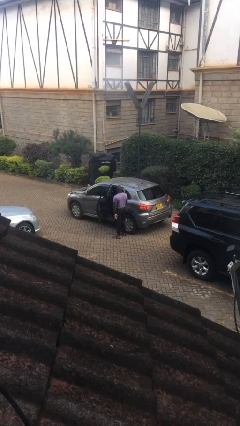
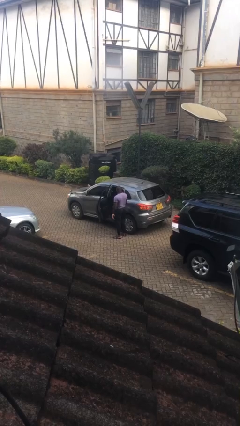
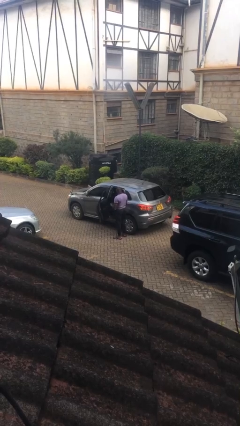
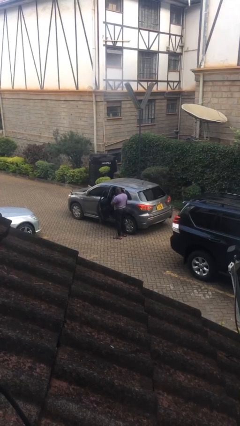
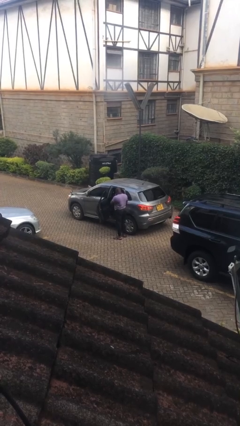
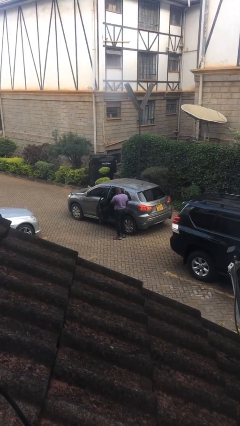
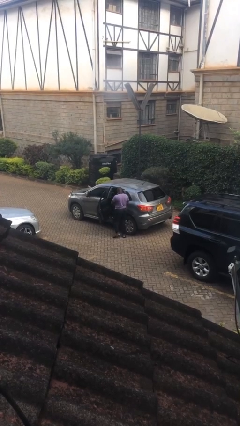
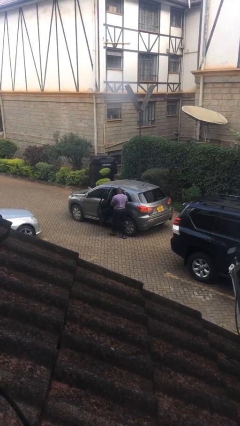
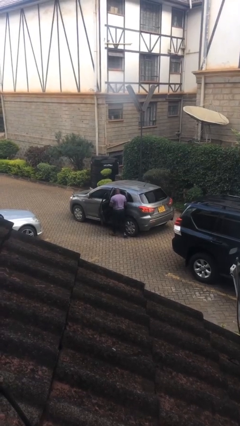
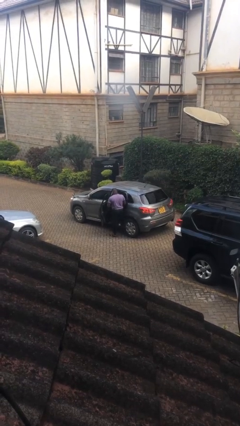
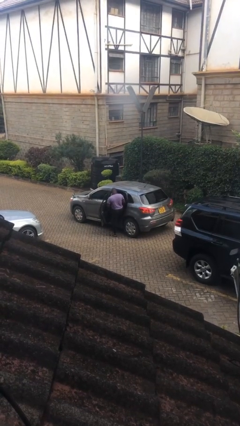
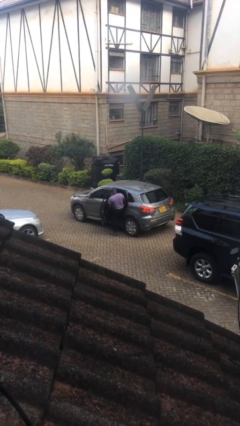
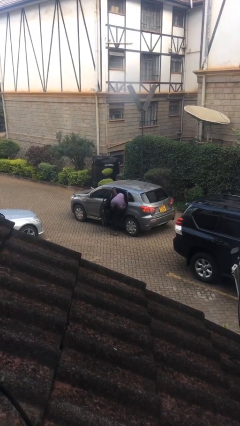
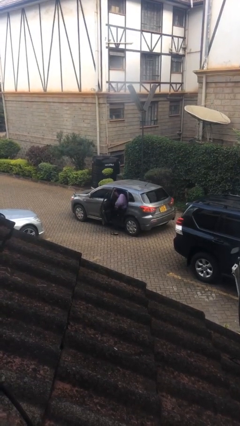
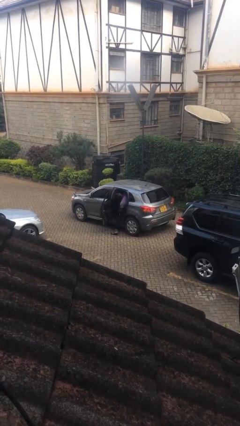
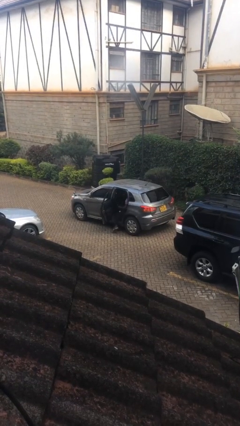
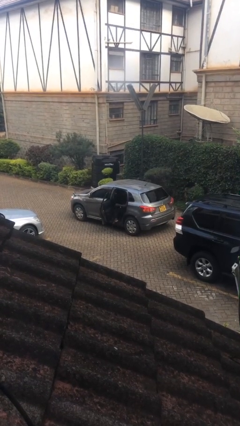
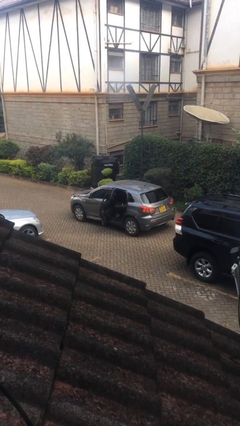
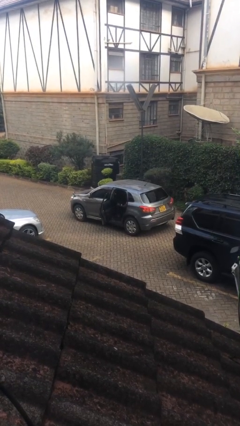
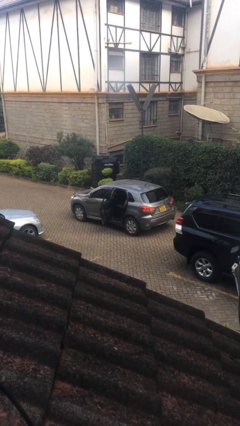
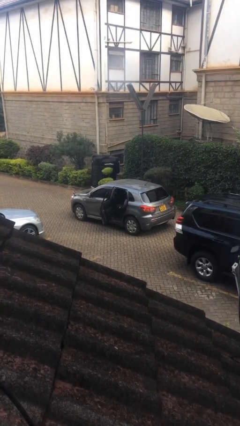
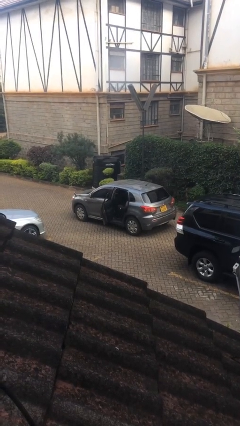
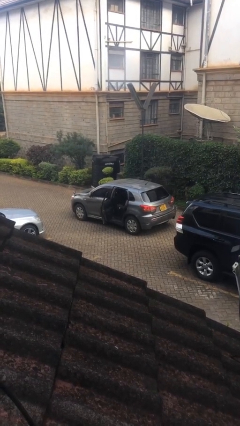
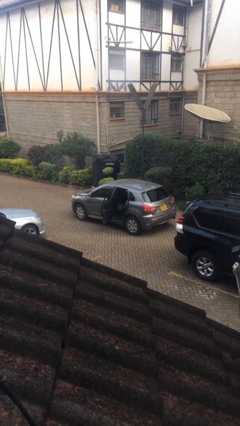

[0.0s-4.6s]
person enters car

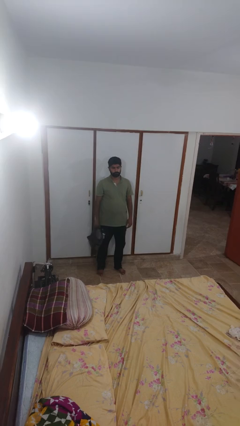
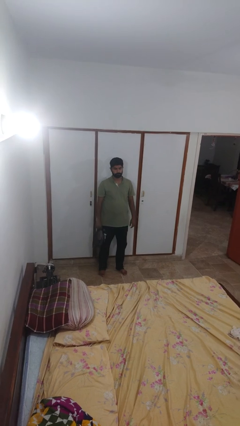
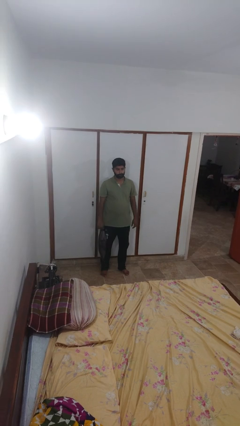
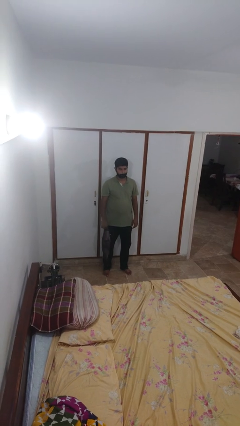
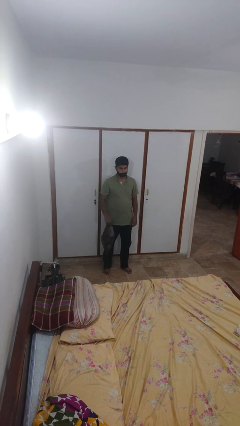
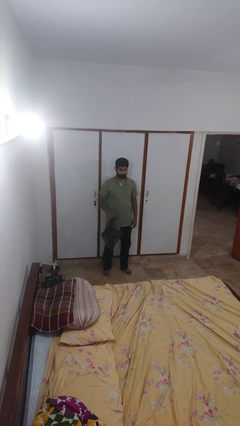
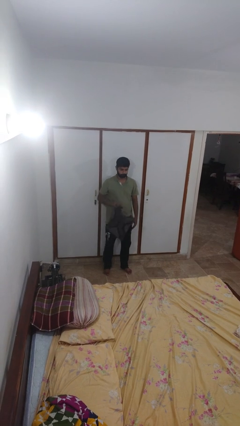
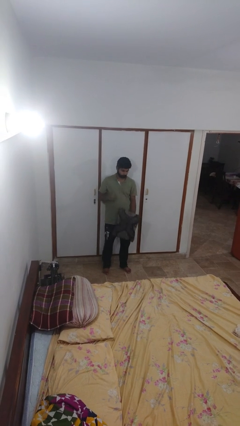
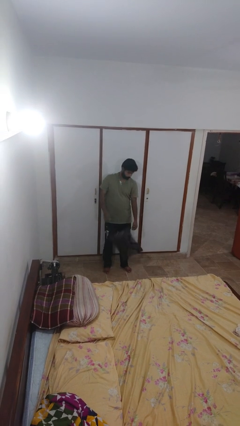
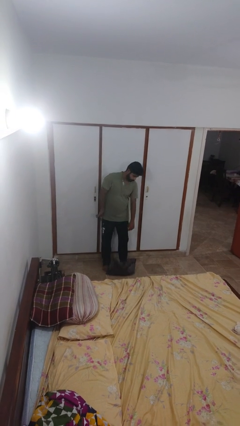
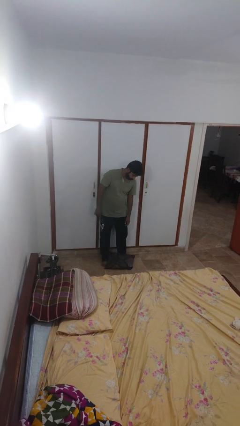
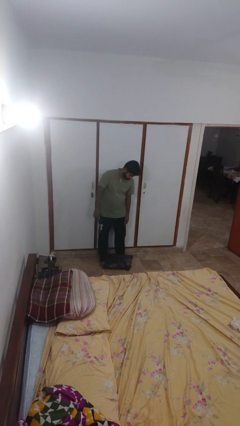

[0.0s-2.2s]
person drops object

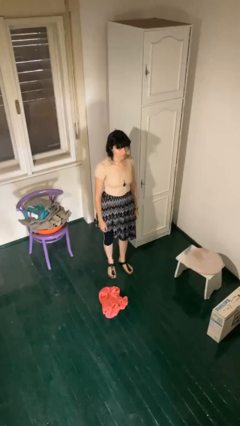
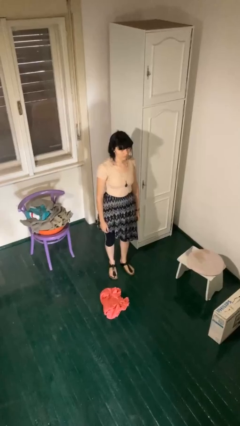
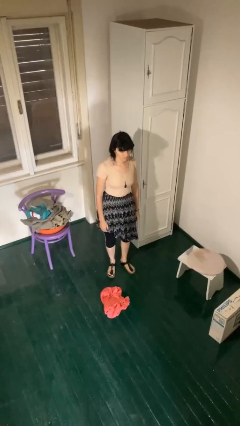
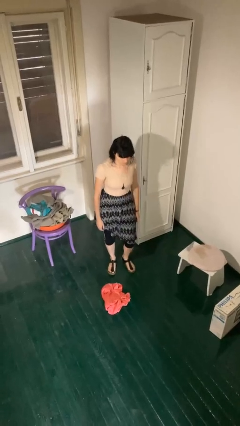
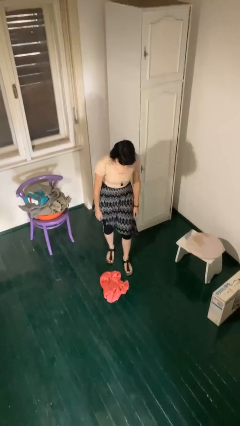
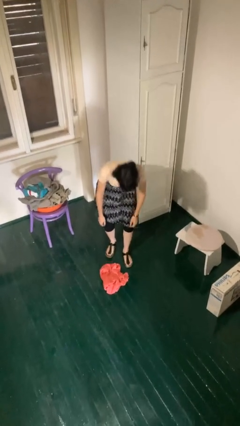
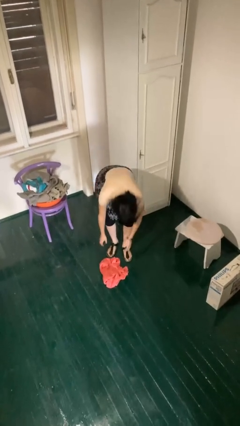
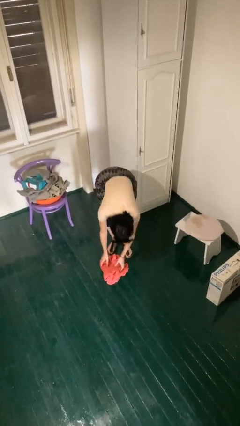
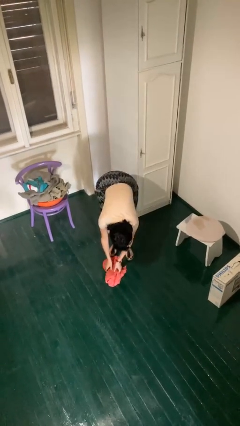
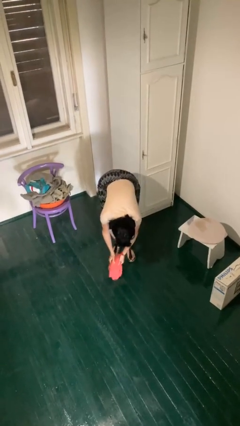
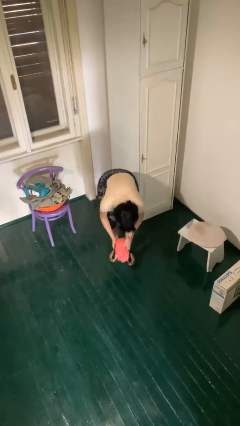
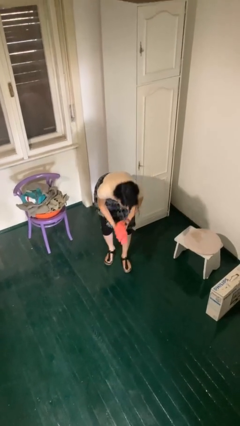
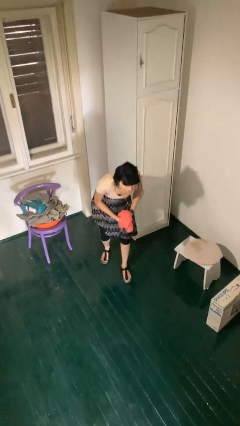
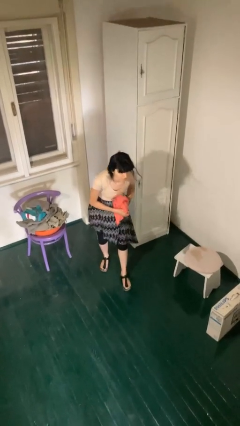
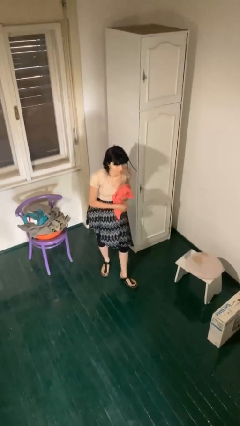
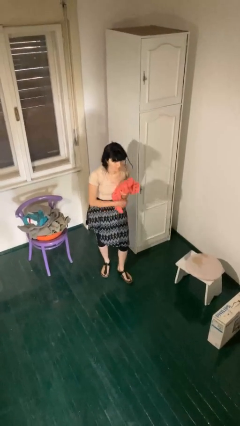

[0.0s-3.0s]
person picks up object from floor

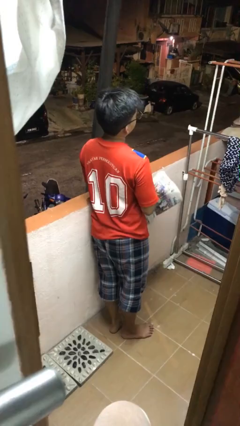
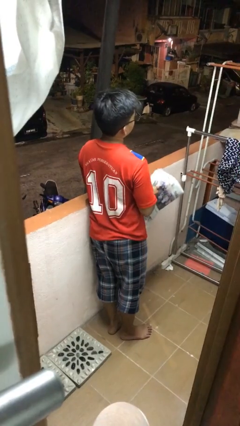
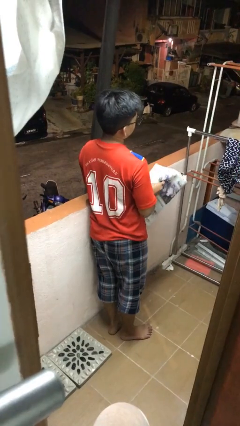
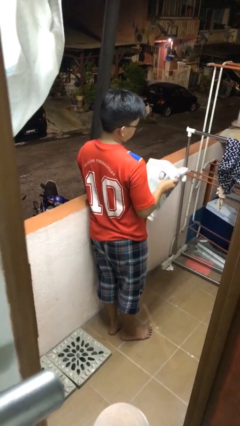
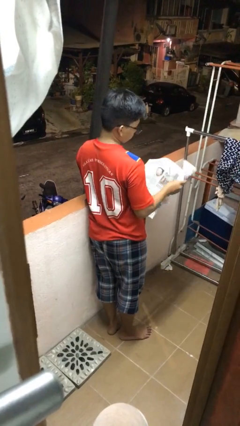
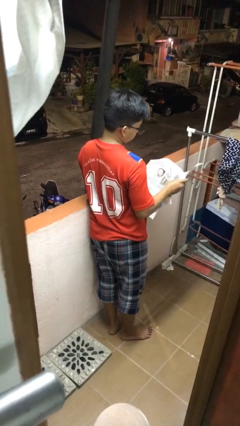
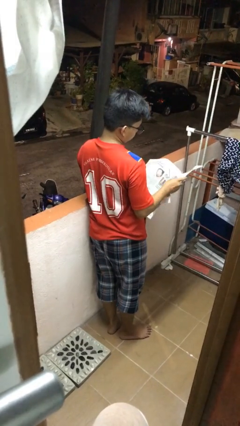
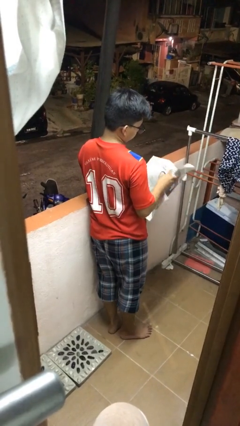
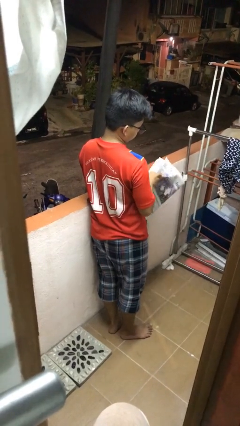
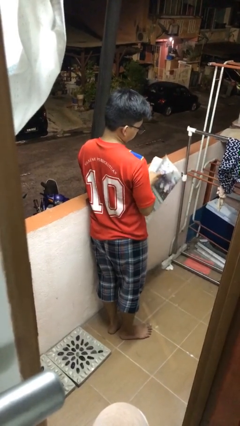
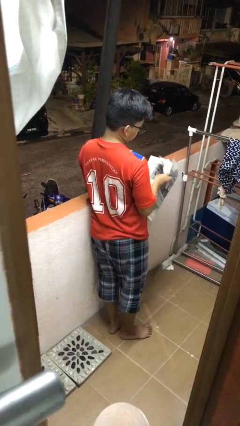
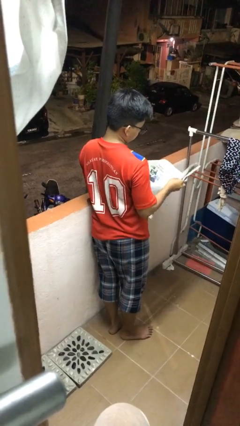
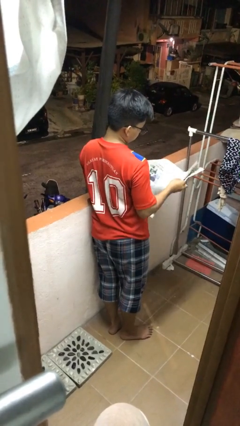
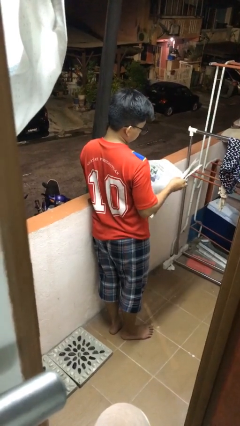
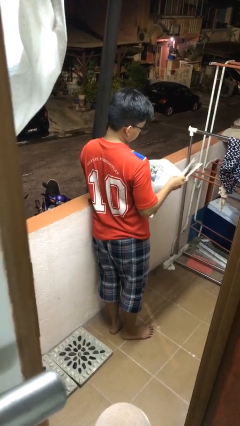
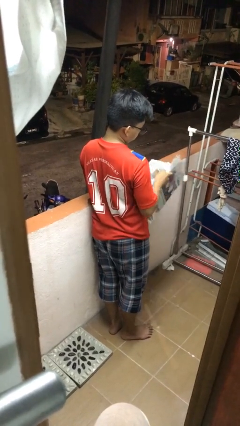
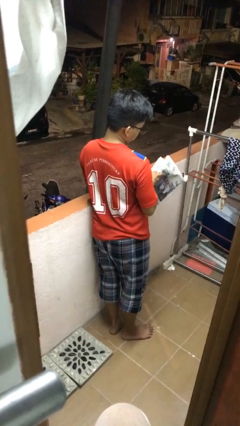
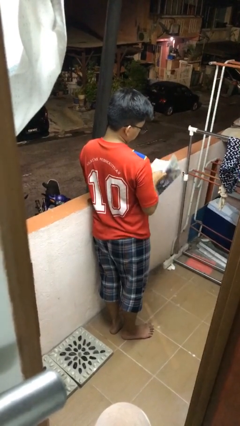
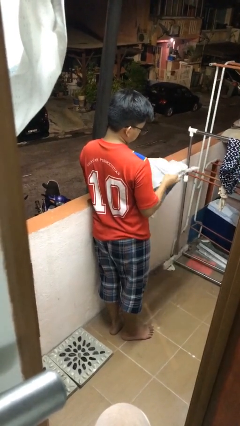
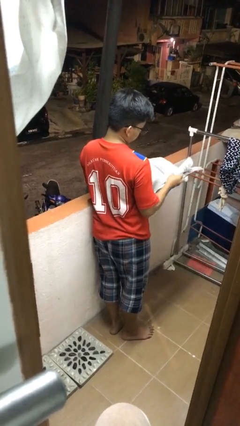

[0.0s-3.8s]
person reads newspaper

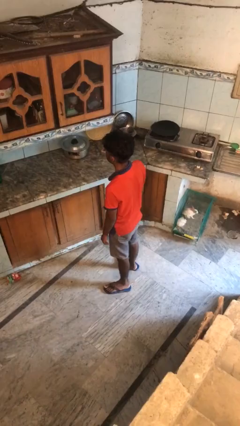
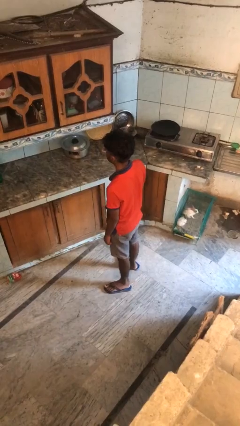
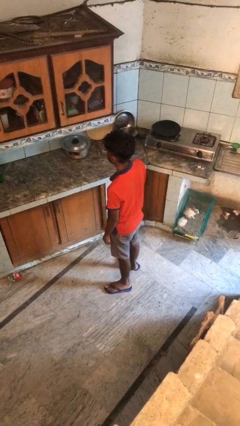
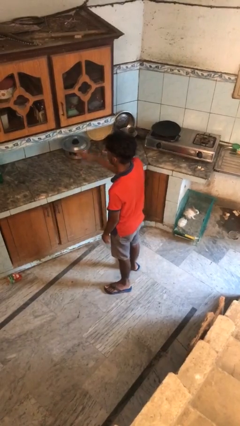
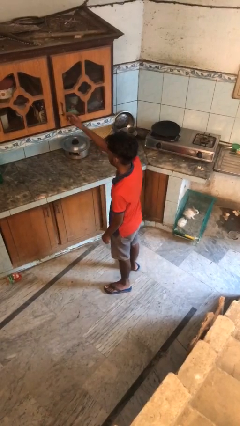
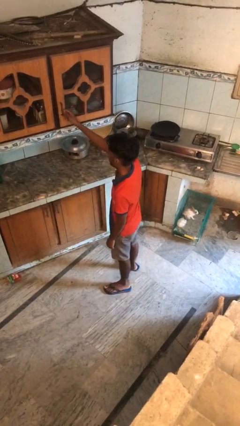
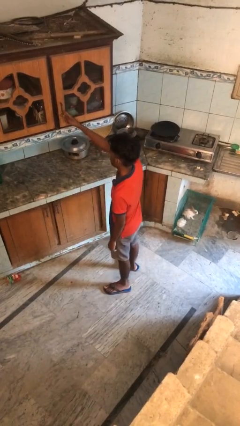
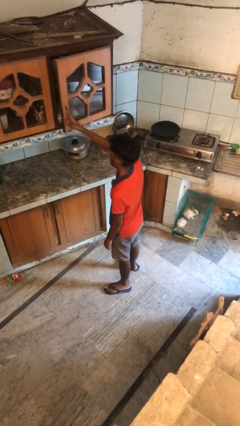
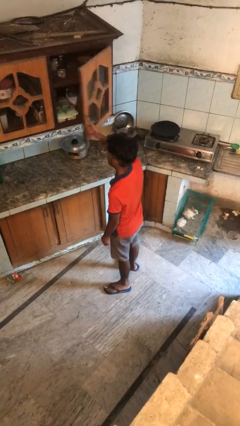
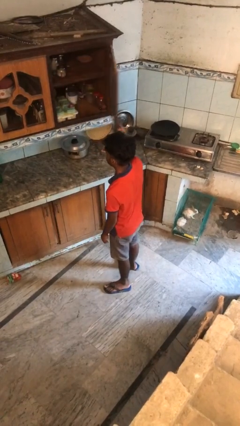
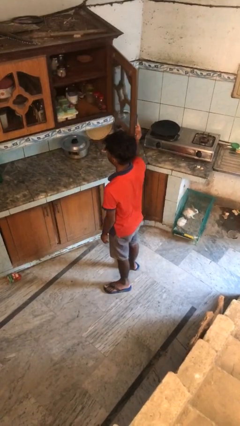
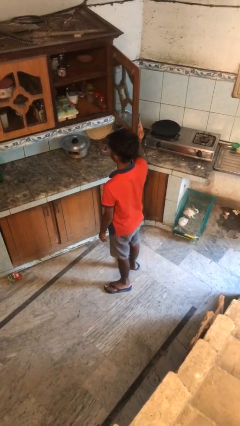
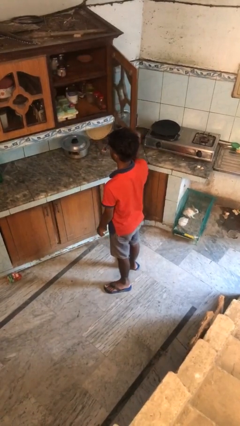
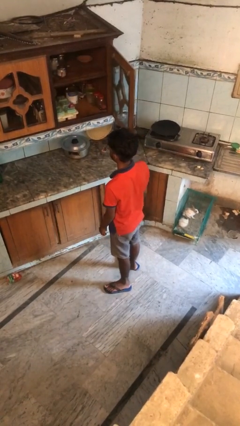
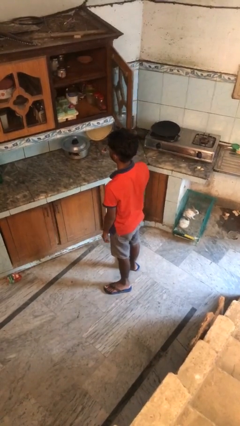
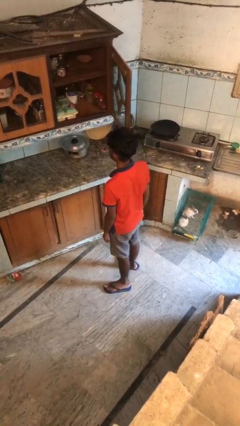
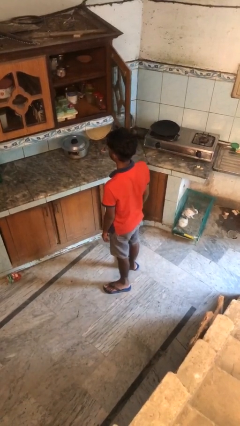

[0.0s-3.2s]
person opens cabinet

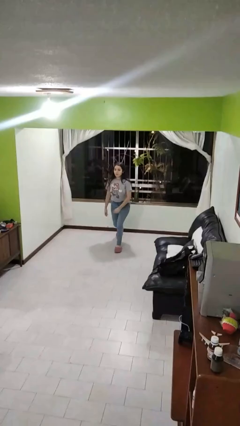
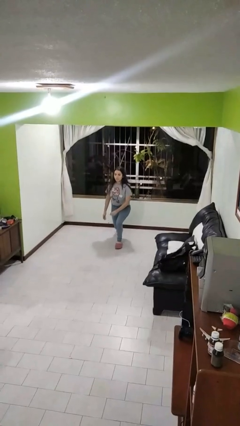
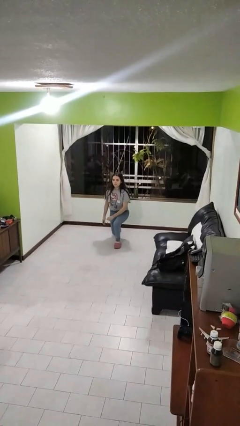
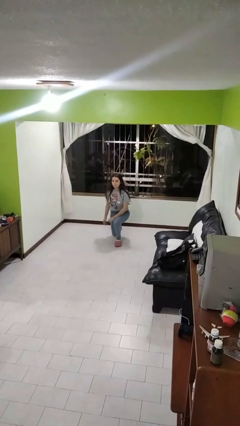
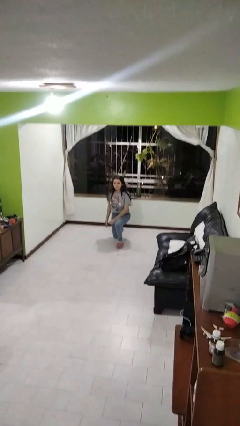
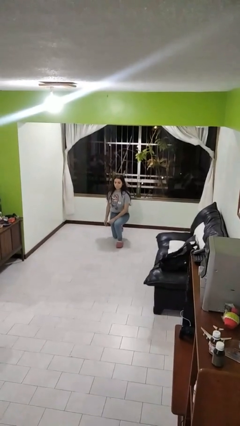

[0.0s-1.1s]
person kneels
